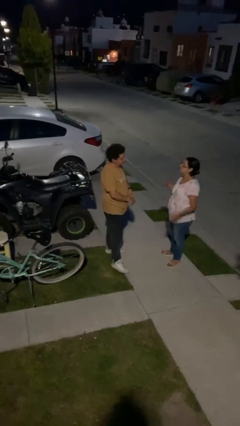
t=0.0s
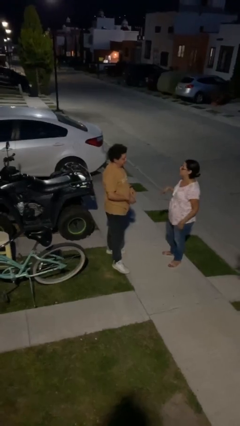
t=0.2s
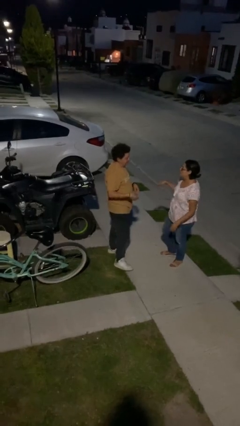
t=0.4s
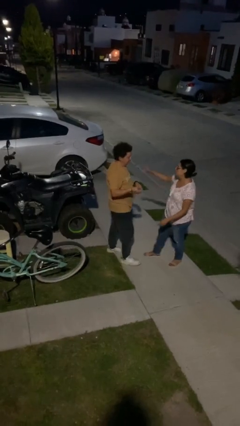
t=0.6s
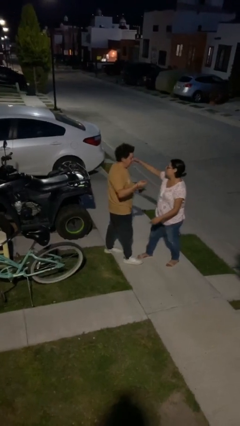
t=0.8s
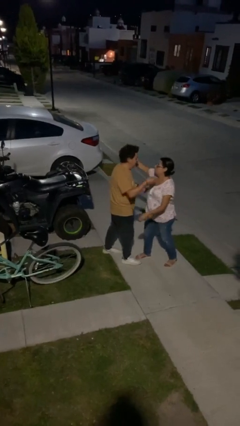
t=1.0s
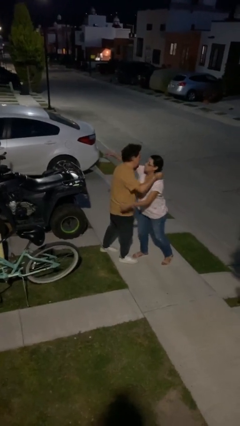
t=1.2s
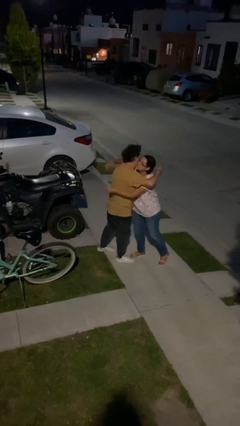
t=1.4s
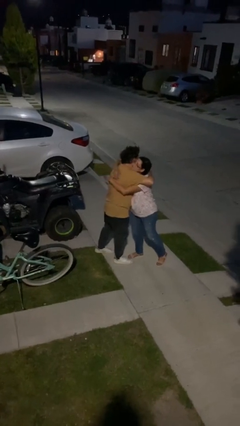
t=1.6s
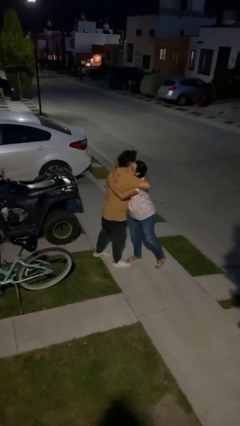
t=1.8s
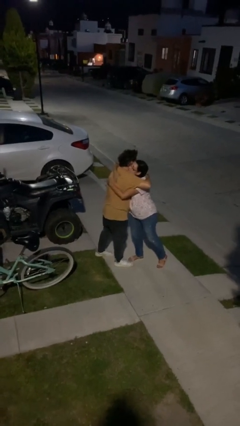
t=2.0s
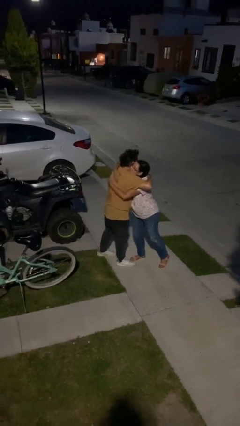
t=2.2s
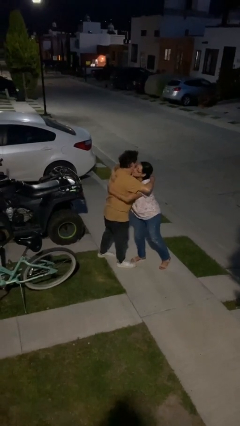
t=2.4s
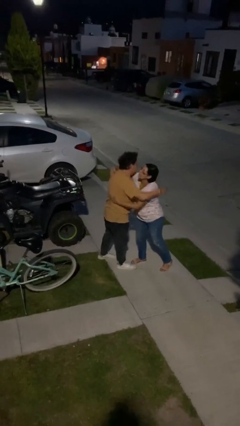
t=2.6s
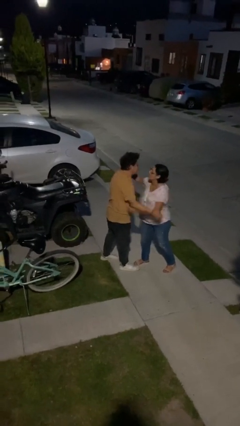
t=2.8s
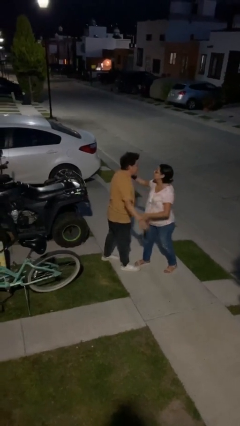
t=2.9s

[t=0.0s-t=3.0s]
person embraces person

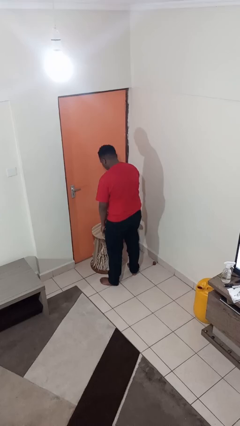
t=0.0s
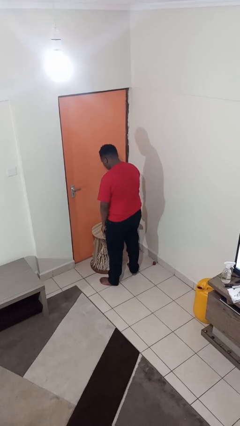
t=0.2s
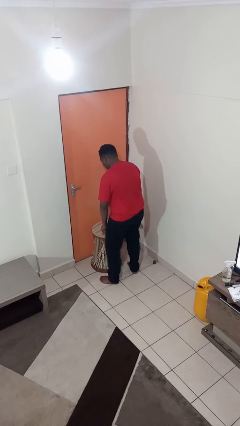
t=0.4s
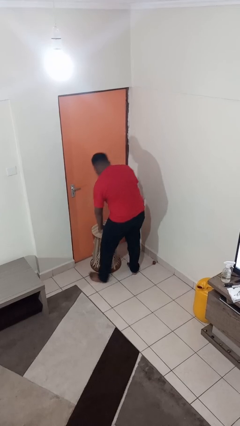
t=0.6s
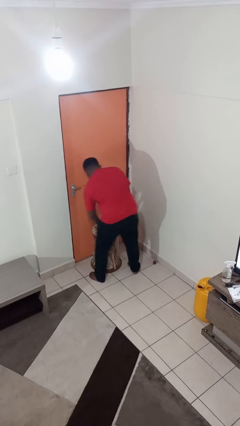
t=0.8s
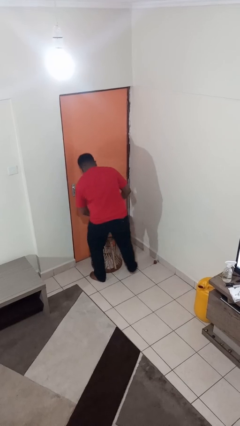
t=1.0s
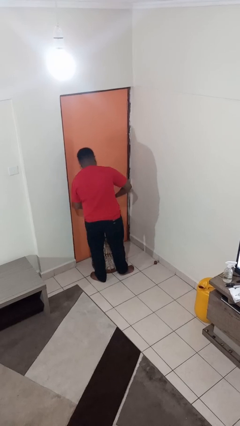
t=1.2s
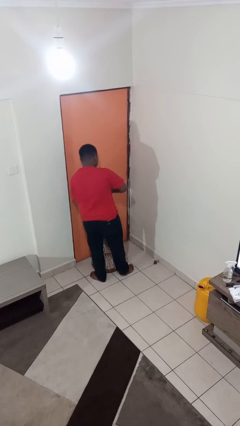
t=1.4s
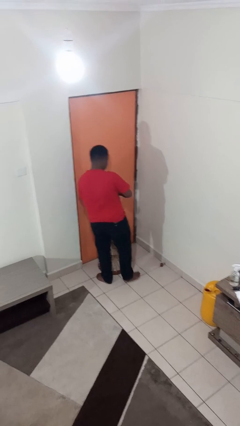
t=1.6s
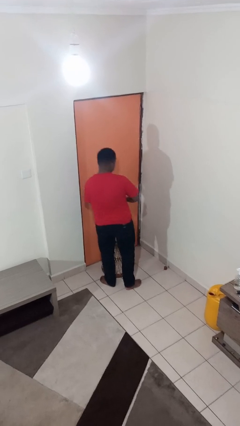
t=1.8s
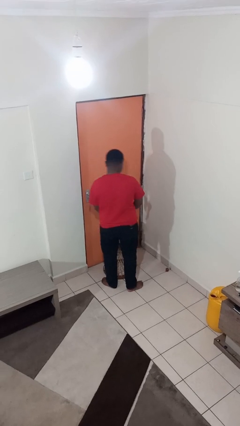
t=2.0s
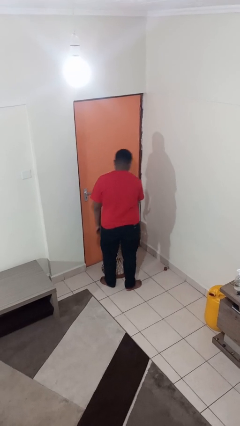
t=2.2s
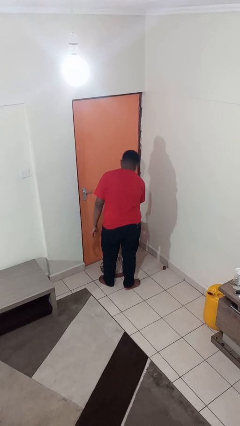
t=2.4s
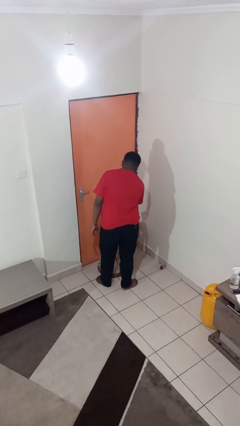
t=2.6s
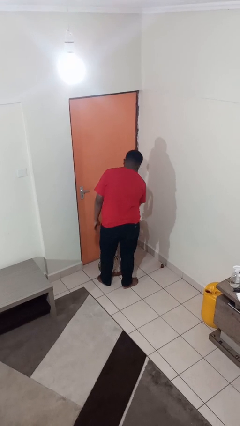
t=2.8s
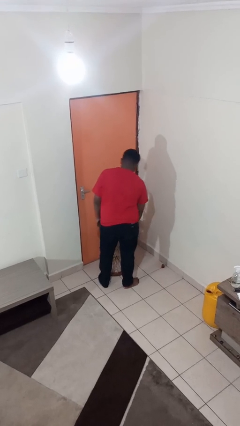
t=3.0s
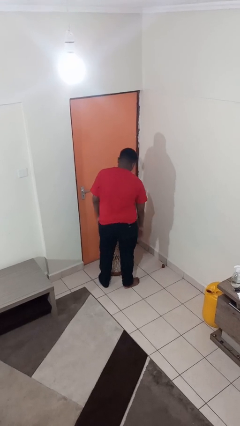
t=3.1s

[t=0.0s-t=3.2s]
person closes jar

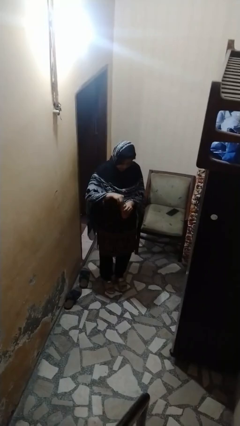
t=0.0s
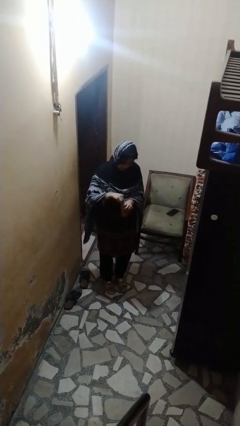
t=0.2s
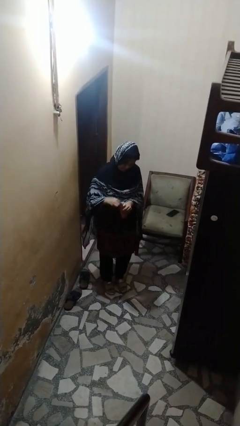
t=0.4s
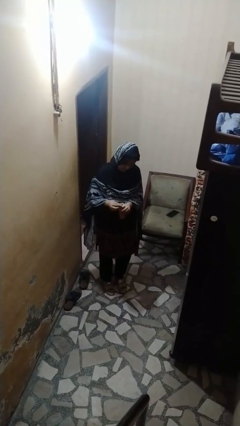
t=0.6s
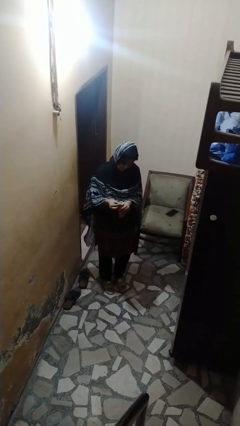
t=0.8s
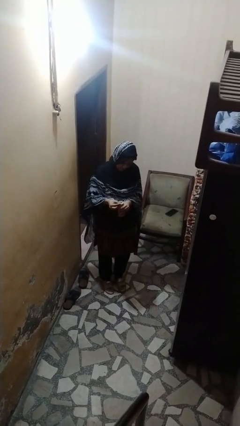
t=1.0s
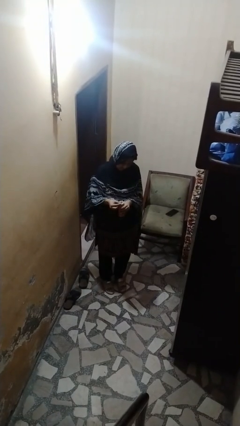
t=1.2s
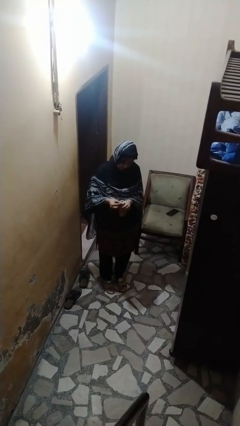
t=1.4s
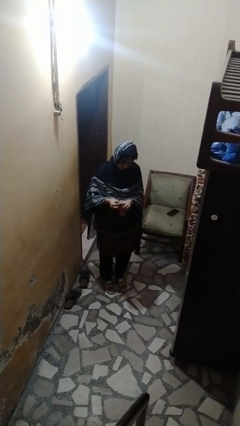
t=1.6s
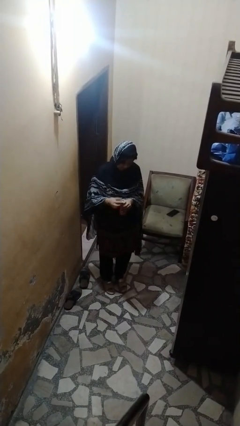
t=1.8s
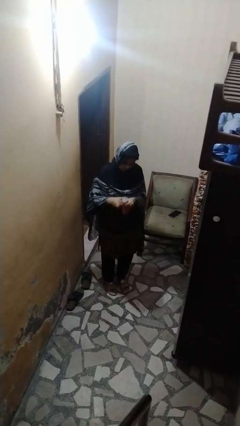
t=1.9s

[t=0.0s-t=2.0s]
person opens beverage can

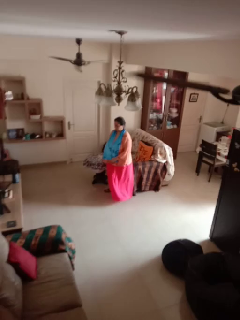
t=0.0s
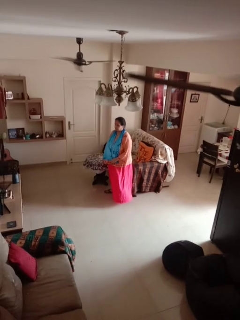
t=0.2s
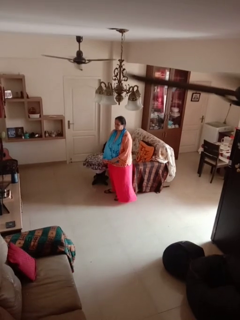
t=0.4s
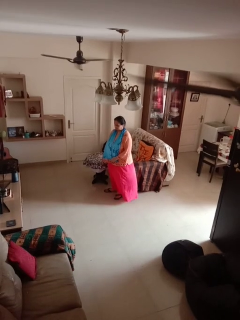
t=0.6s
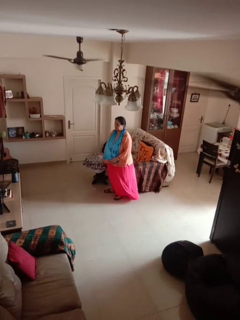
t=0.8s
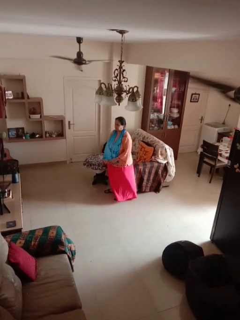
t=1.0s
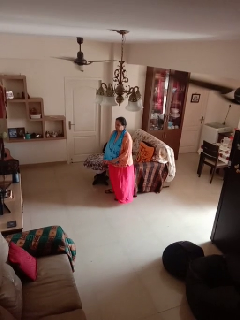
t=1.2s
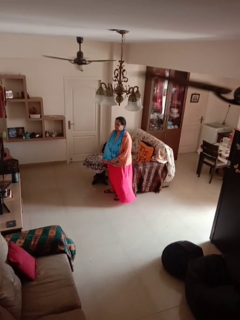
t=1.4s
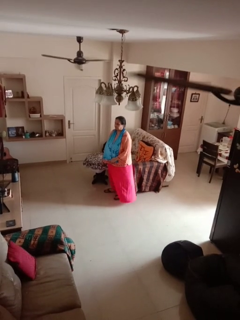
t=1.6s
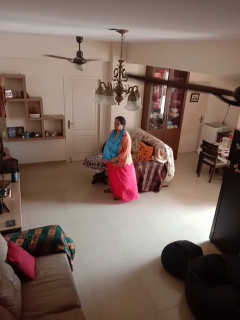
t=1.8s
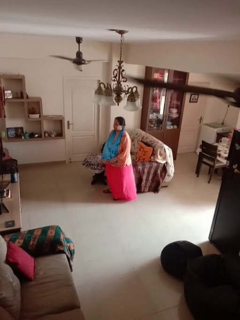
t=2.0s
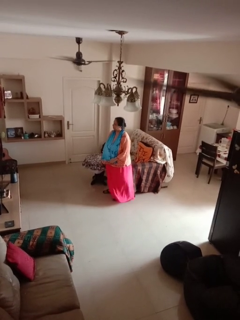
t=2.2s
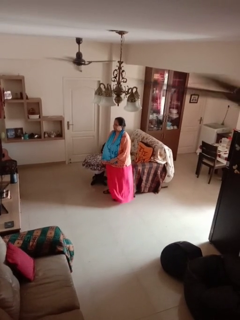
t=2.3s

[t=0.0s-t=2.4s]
person nods head

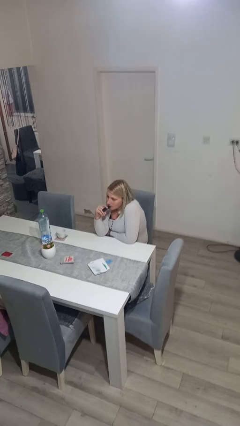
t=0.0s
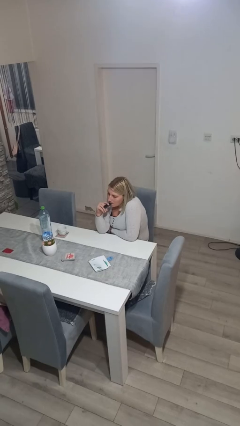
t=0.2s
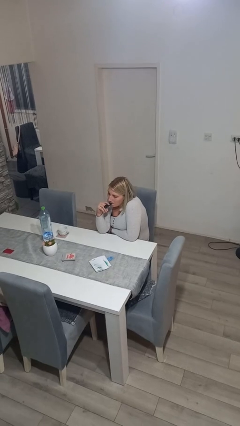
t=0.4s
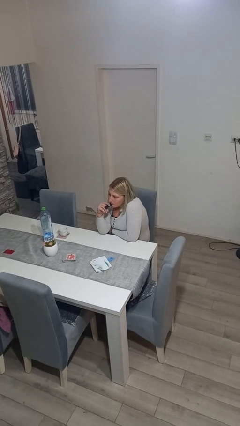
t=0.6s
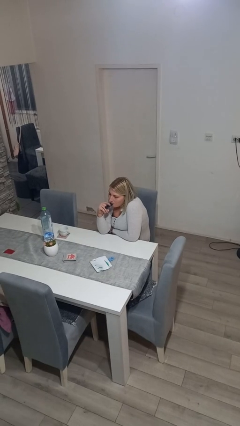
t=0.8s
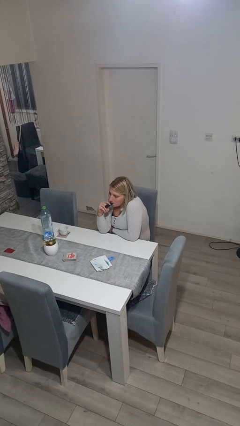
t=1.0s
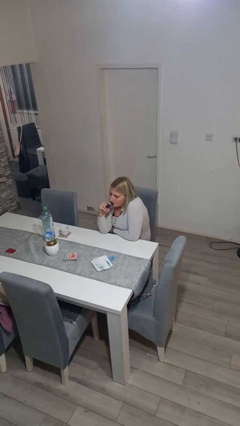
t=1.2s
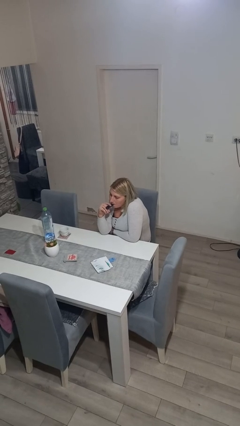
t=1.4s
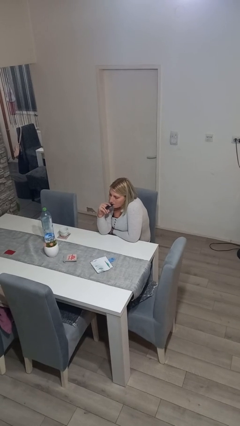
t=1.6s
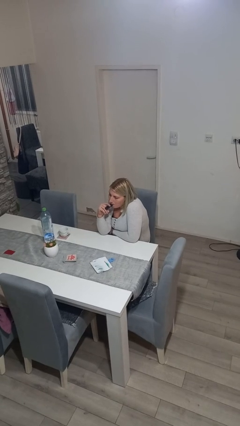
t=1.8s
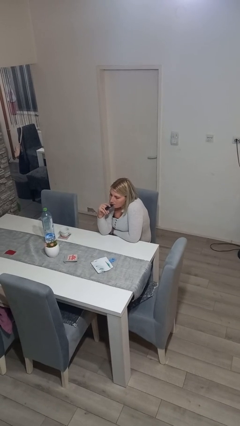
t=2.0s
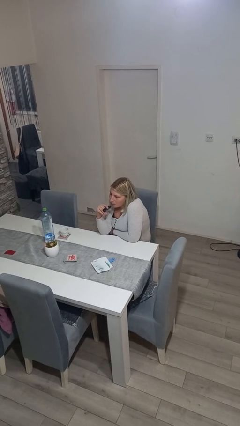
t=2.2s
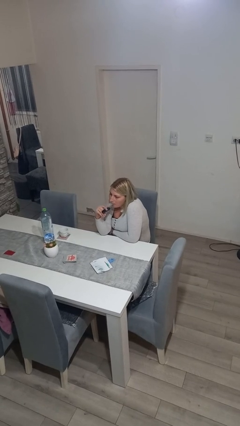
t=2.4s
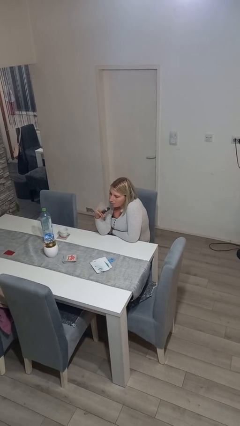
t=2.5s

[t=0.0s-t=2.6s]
person vapes

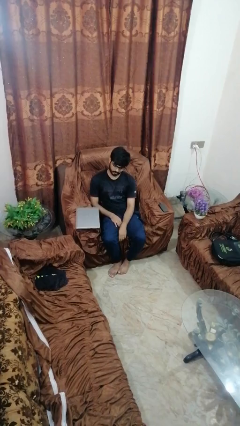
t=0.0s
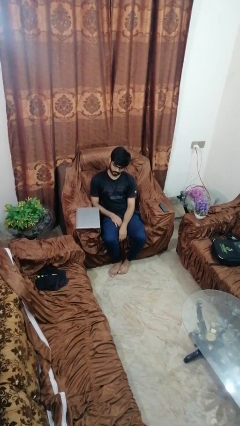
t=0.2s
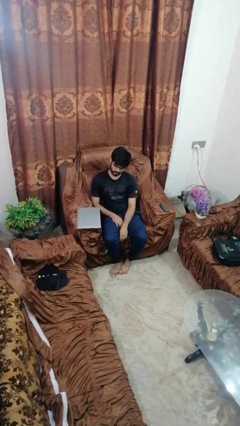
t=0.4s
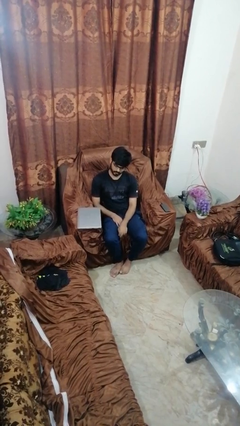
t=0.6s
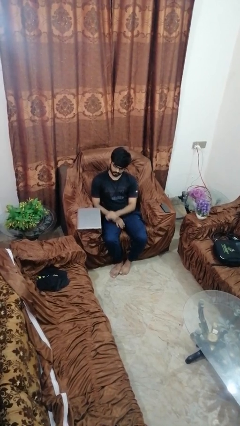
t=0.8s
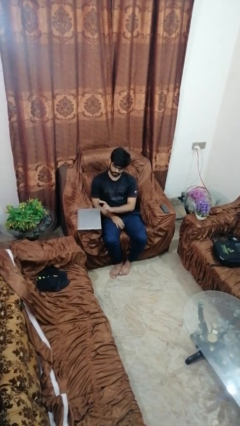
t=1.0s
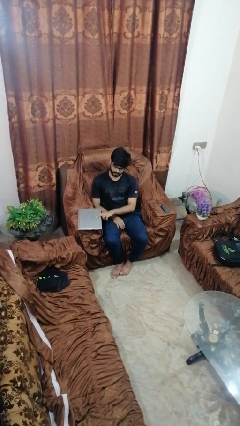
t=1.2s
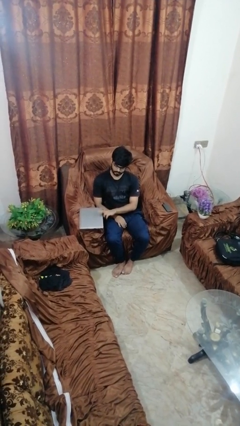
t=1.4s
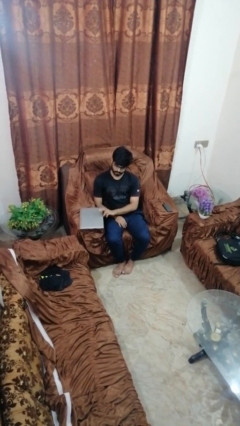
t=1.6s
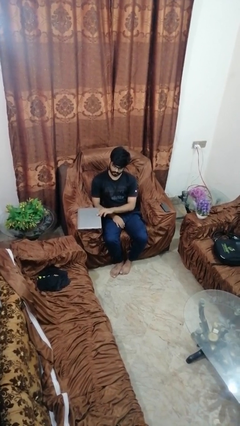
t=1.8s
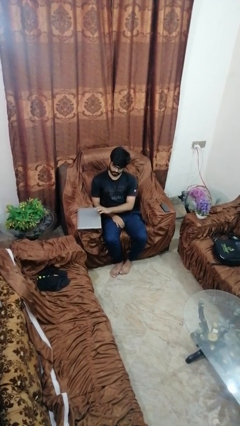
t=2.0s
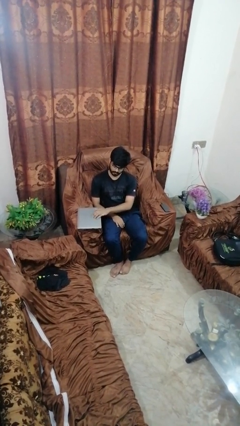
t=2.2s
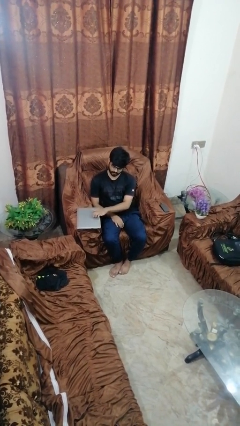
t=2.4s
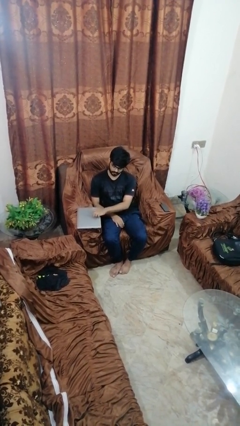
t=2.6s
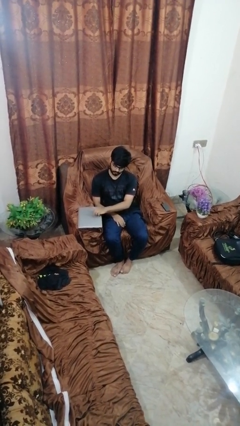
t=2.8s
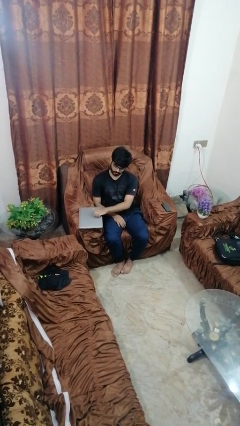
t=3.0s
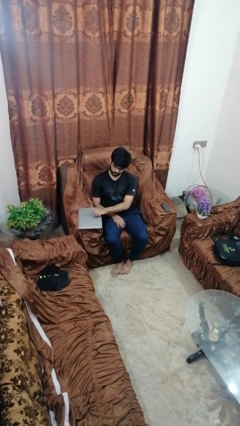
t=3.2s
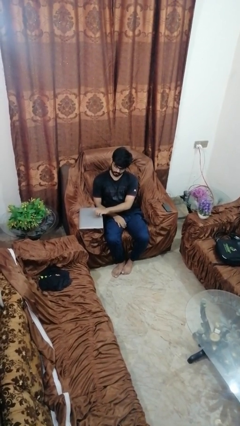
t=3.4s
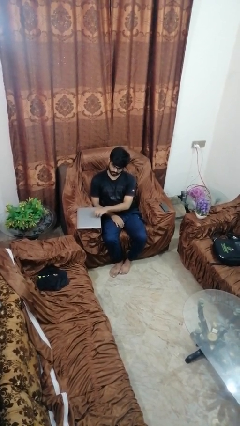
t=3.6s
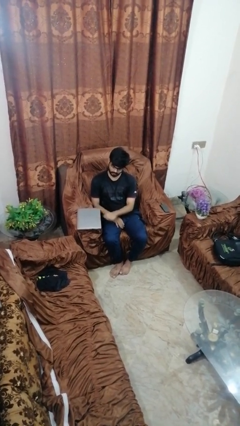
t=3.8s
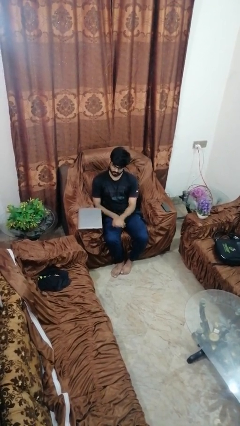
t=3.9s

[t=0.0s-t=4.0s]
person taps object with finger

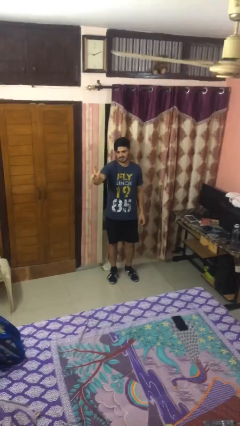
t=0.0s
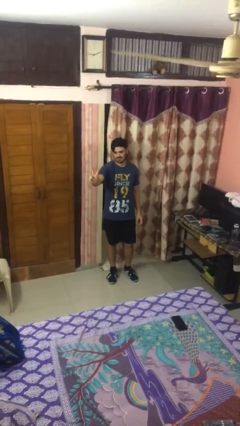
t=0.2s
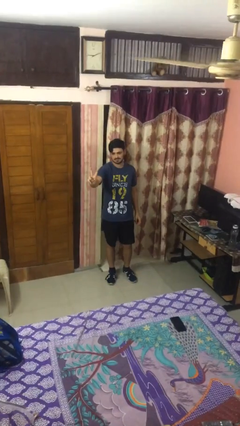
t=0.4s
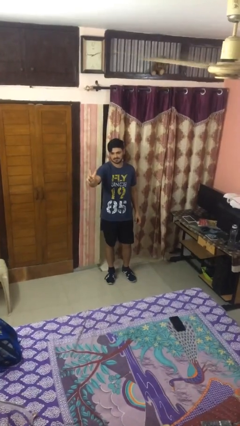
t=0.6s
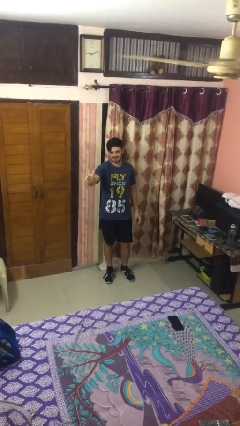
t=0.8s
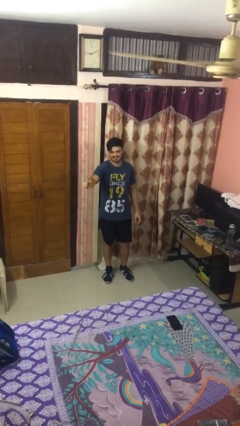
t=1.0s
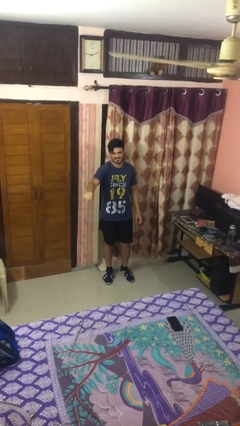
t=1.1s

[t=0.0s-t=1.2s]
person gestures peace
